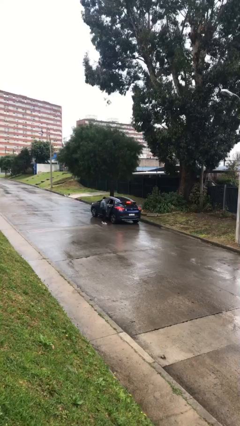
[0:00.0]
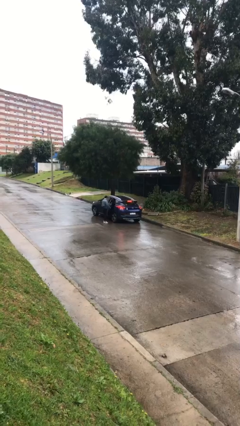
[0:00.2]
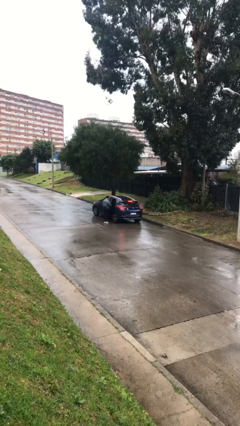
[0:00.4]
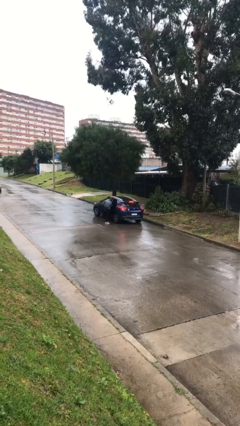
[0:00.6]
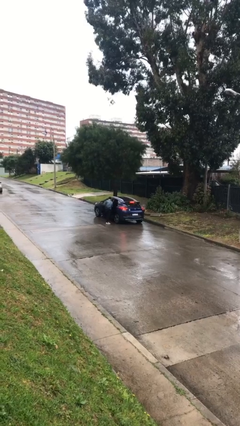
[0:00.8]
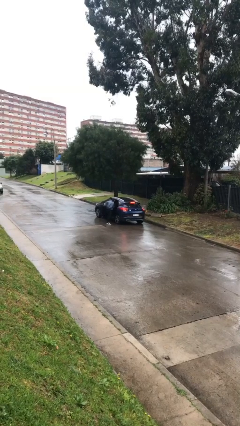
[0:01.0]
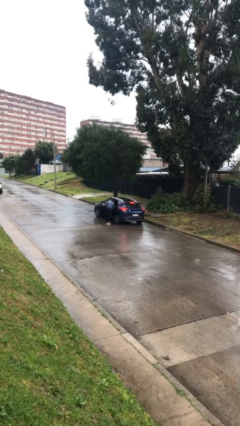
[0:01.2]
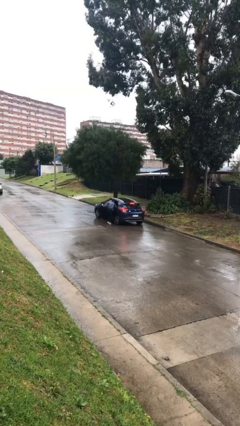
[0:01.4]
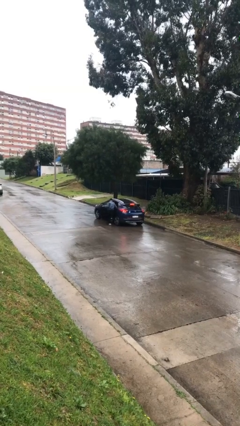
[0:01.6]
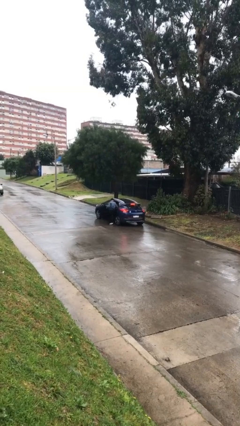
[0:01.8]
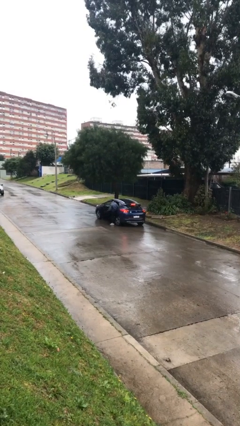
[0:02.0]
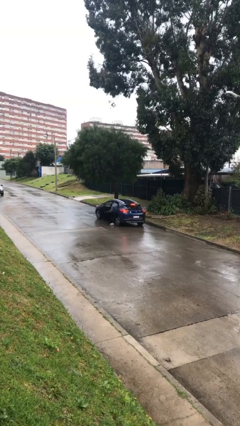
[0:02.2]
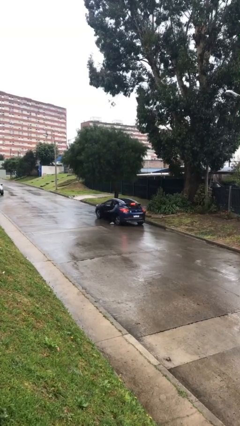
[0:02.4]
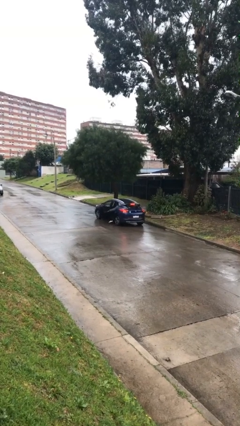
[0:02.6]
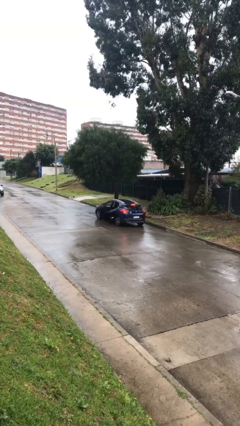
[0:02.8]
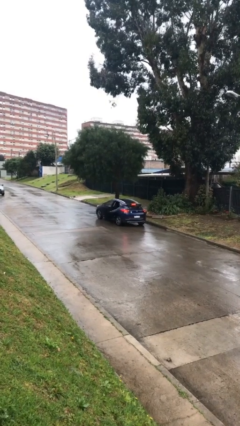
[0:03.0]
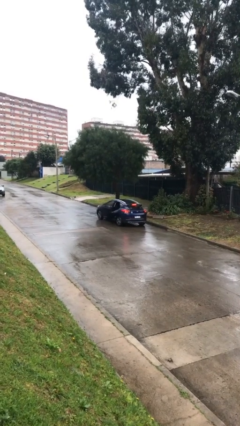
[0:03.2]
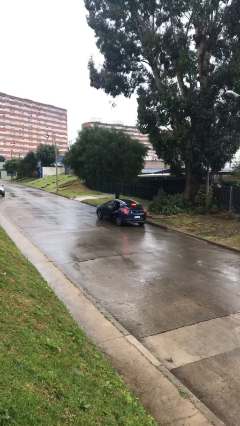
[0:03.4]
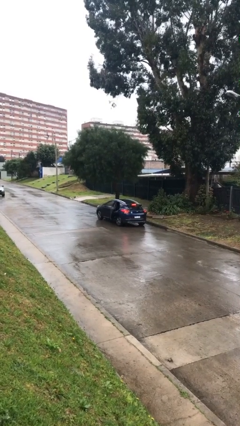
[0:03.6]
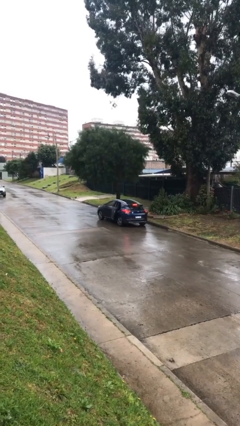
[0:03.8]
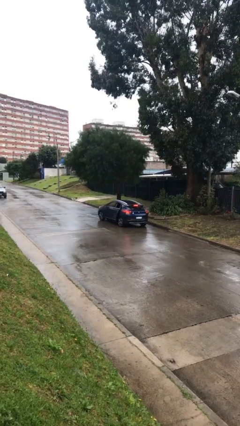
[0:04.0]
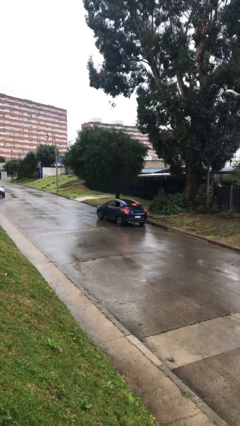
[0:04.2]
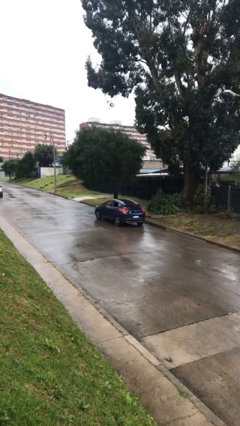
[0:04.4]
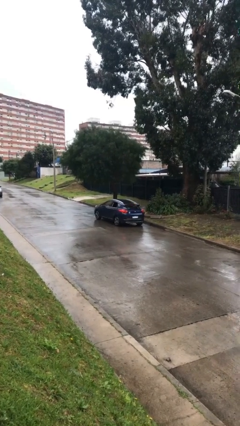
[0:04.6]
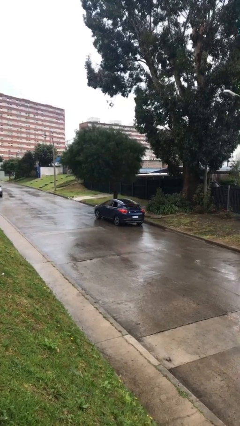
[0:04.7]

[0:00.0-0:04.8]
car picks up person

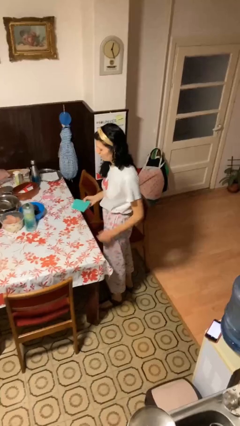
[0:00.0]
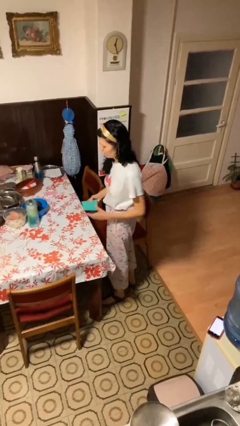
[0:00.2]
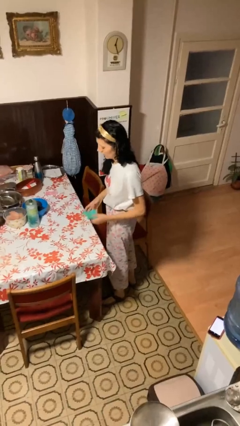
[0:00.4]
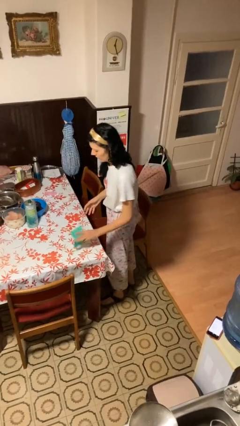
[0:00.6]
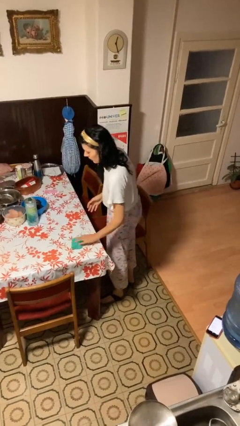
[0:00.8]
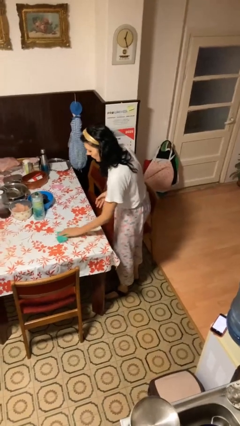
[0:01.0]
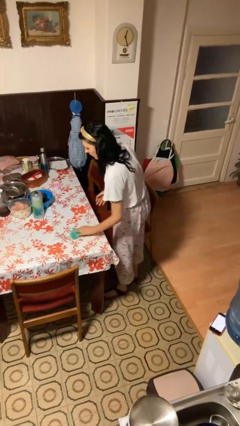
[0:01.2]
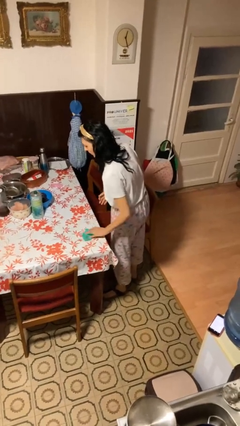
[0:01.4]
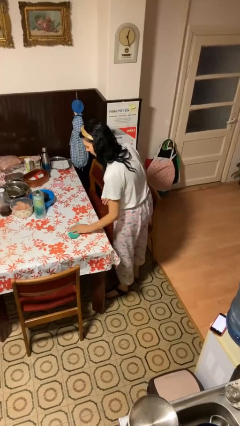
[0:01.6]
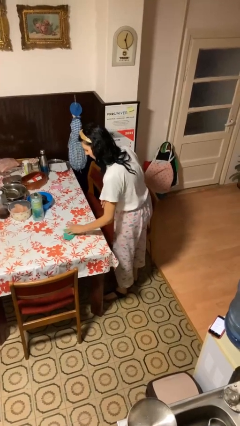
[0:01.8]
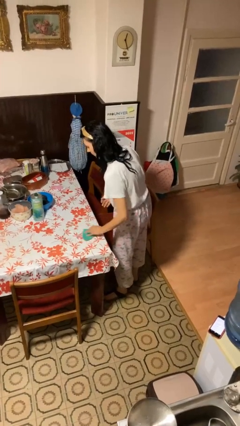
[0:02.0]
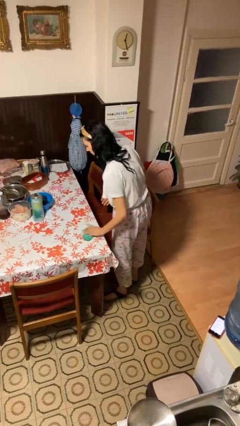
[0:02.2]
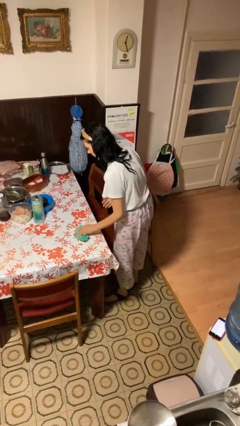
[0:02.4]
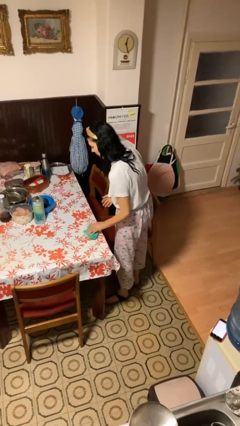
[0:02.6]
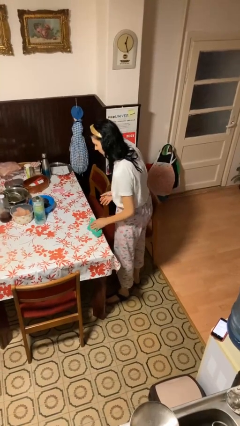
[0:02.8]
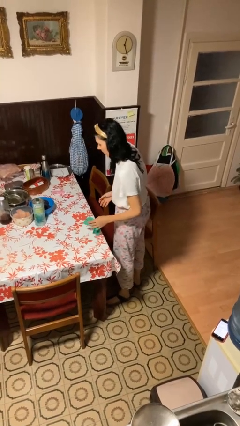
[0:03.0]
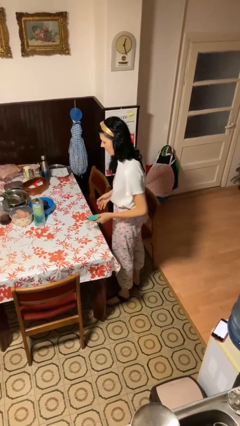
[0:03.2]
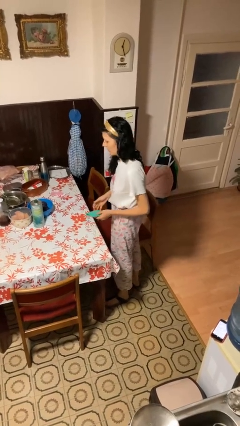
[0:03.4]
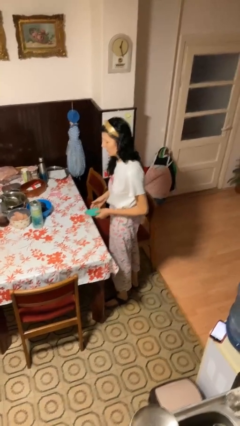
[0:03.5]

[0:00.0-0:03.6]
person cleans table with rag

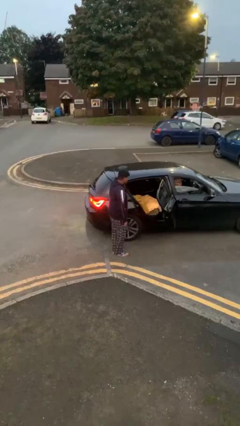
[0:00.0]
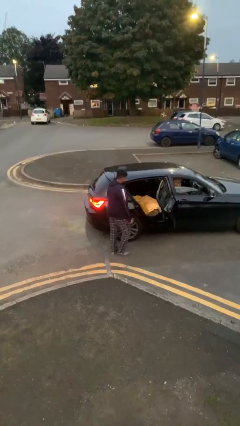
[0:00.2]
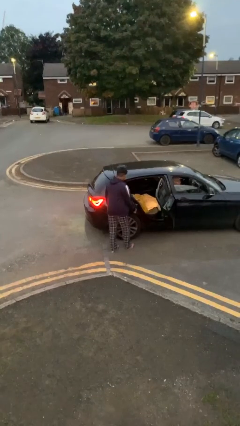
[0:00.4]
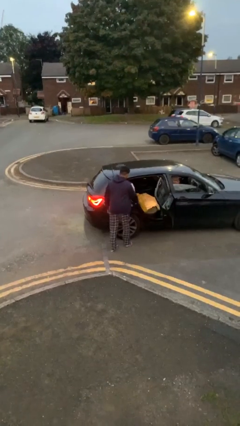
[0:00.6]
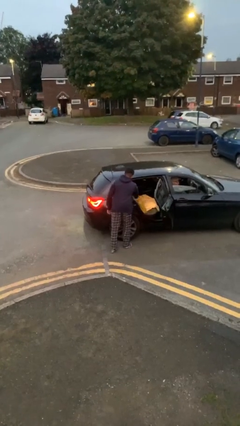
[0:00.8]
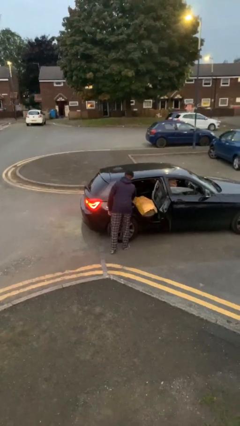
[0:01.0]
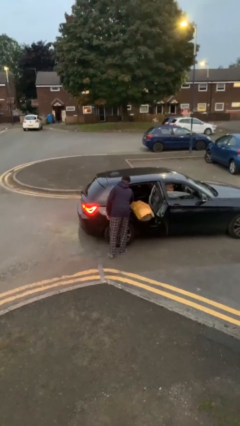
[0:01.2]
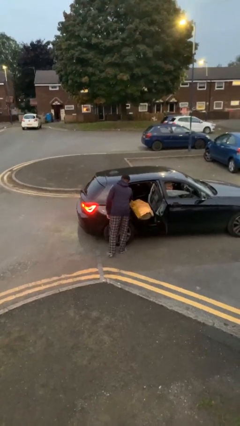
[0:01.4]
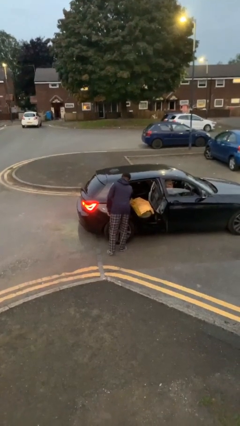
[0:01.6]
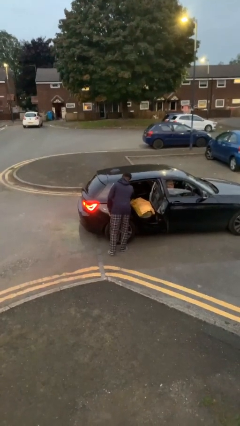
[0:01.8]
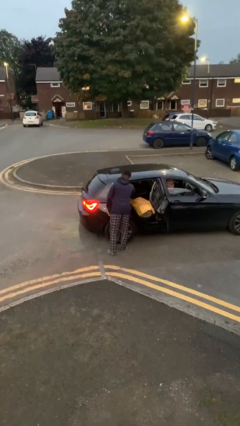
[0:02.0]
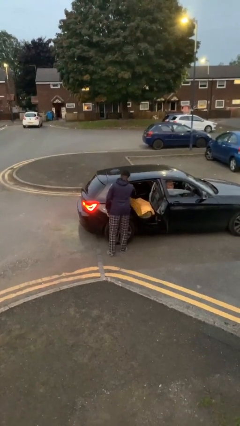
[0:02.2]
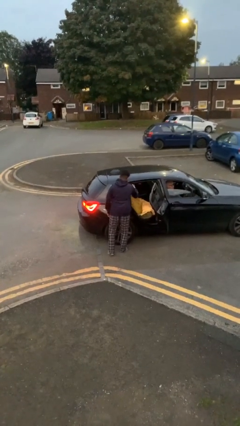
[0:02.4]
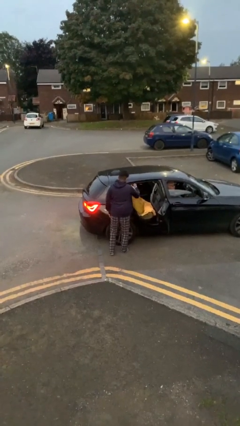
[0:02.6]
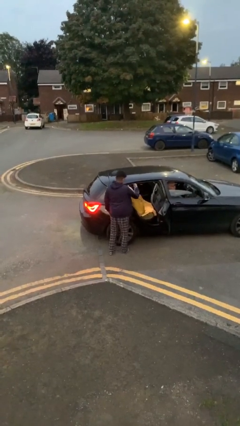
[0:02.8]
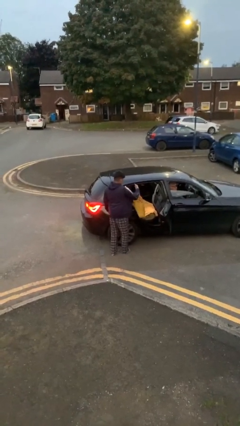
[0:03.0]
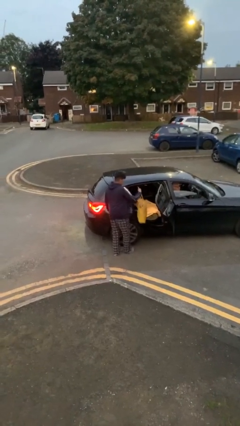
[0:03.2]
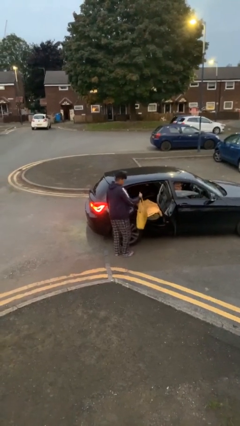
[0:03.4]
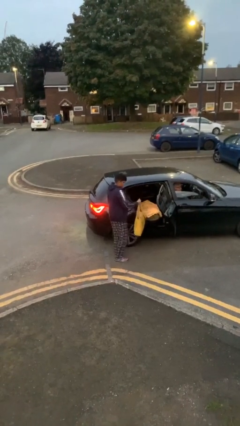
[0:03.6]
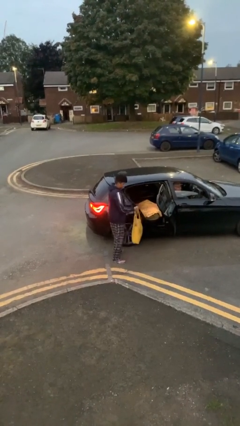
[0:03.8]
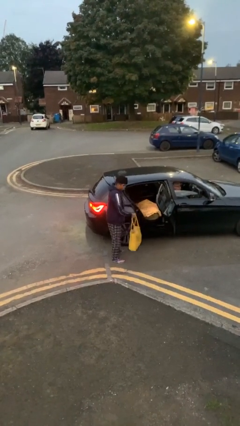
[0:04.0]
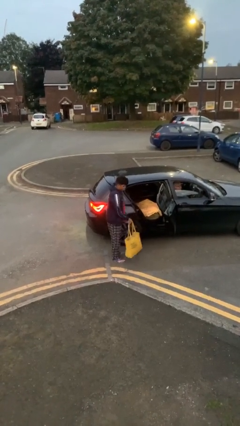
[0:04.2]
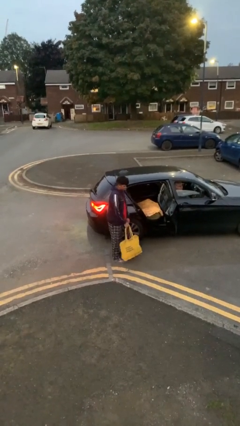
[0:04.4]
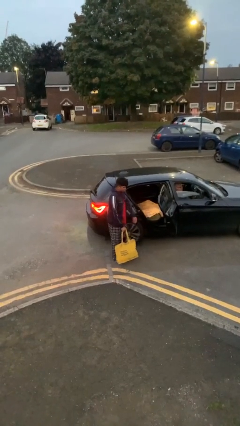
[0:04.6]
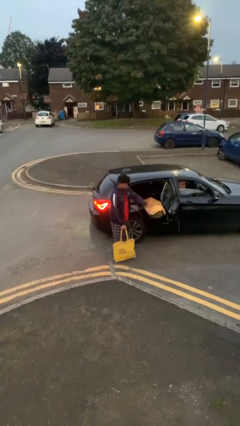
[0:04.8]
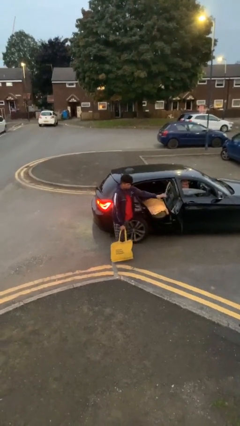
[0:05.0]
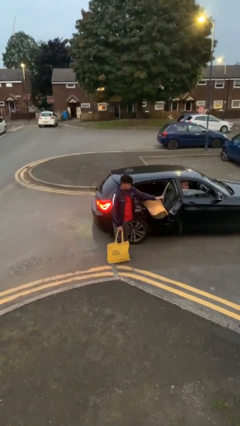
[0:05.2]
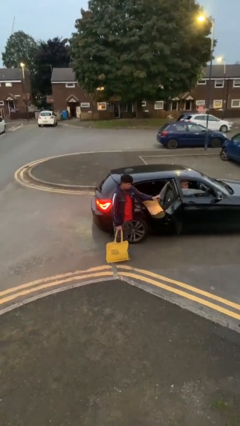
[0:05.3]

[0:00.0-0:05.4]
person unloads car

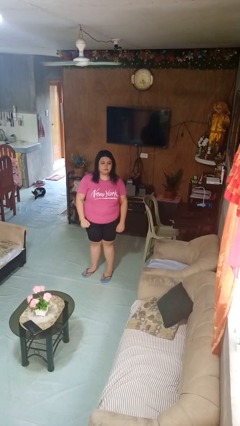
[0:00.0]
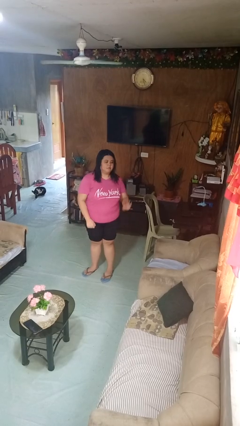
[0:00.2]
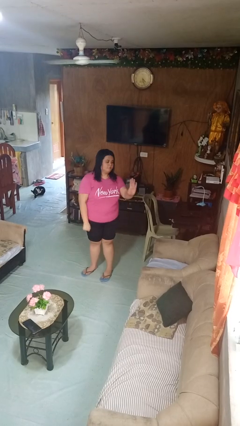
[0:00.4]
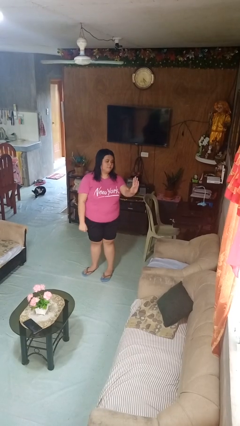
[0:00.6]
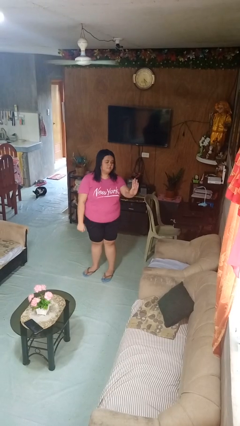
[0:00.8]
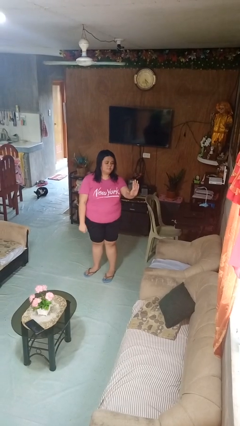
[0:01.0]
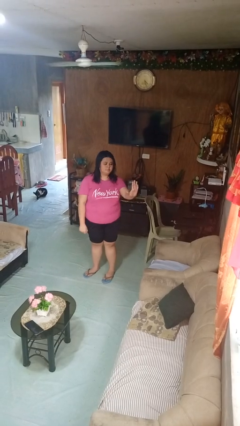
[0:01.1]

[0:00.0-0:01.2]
person gestures stop

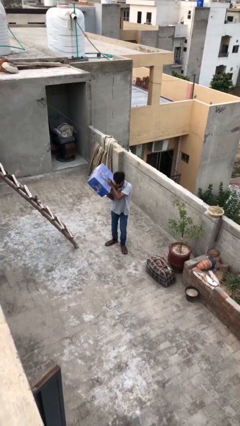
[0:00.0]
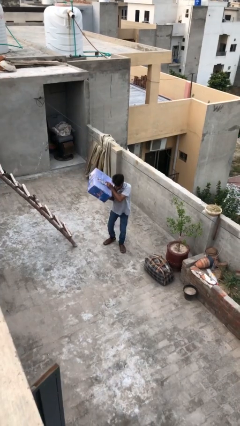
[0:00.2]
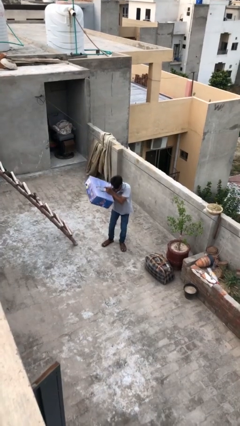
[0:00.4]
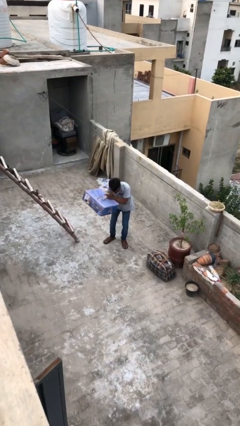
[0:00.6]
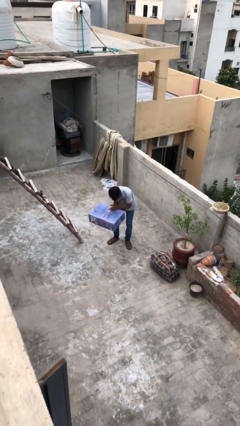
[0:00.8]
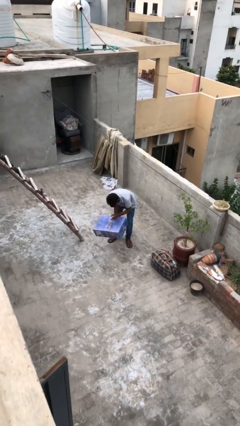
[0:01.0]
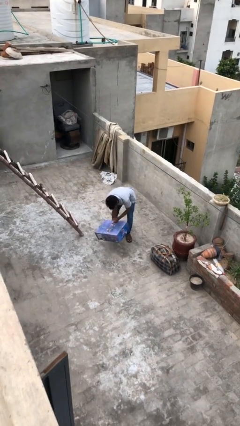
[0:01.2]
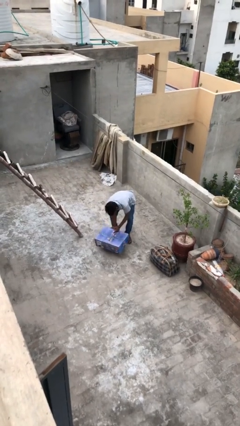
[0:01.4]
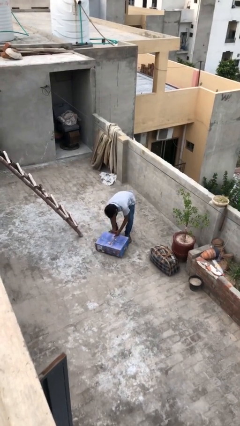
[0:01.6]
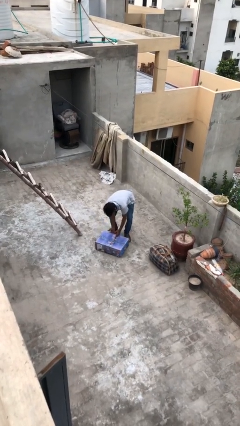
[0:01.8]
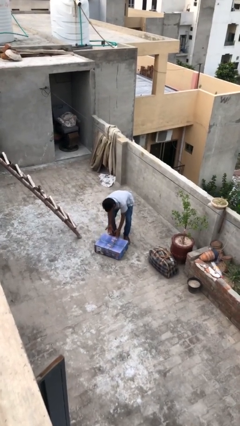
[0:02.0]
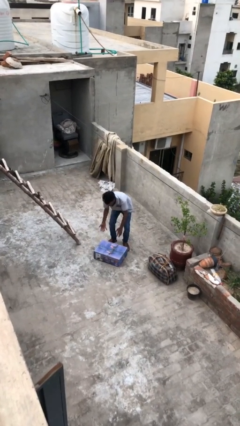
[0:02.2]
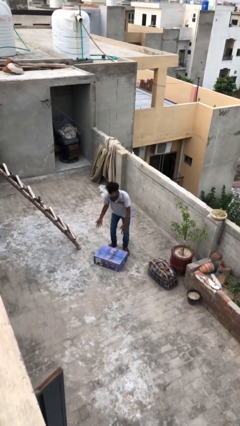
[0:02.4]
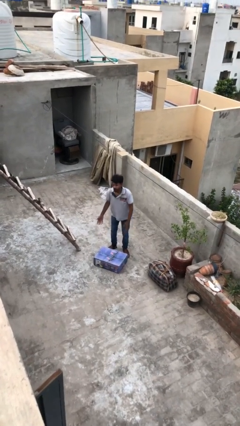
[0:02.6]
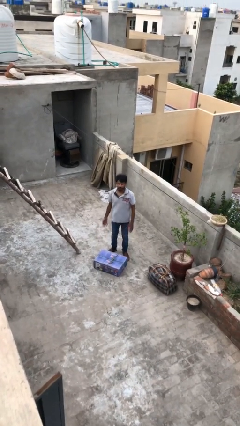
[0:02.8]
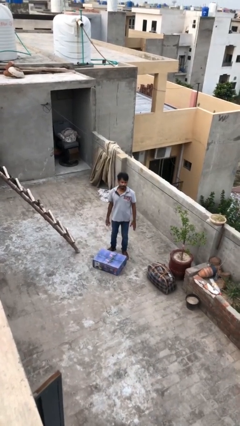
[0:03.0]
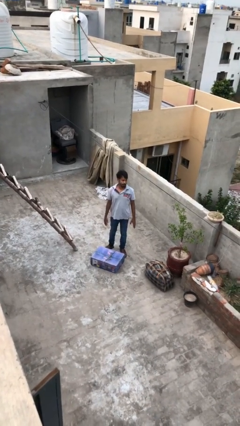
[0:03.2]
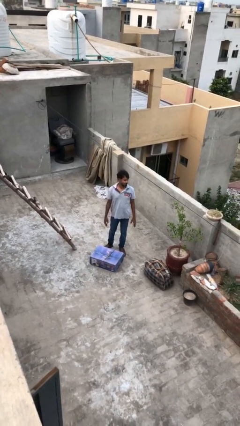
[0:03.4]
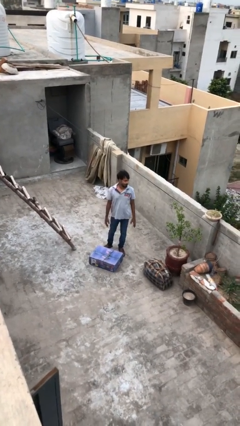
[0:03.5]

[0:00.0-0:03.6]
person puts down object on floor
